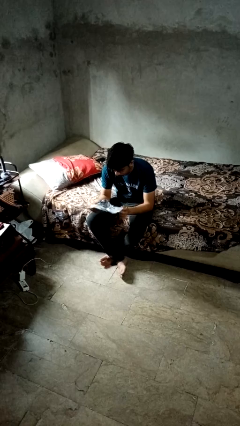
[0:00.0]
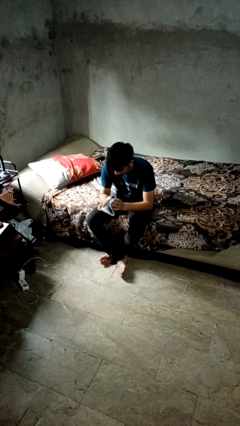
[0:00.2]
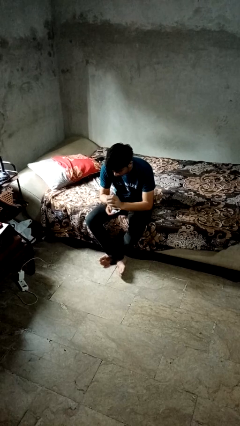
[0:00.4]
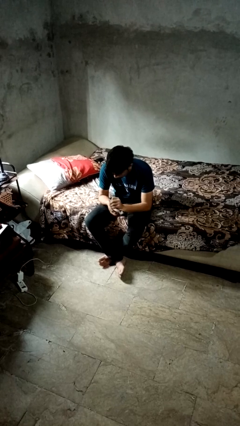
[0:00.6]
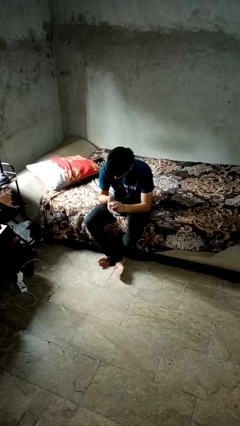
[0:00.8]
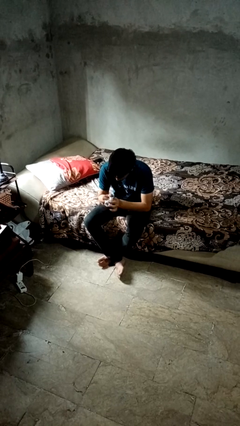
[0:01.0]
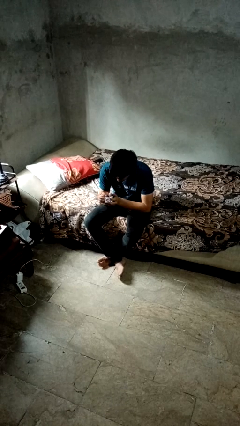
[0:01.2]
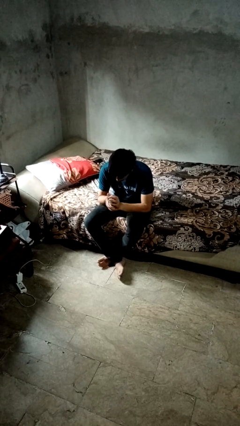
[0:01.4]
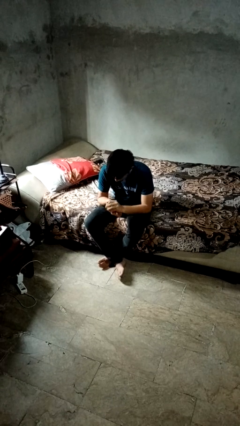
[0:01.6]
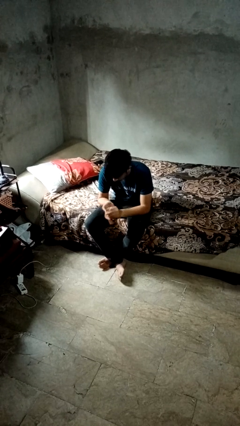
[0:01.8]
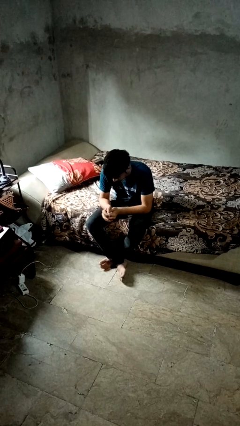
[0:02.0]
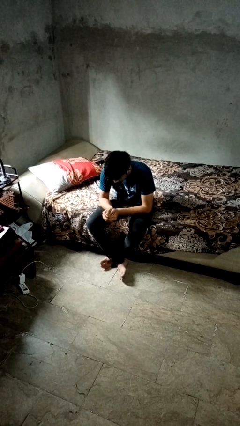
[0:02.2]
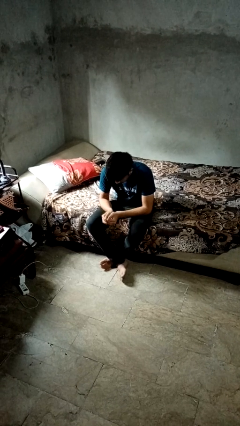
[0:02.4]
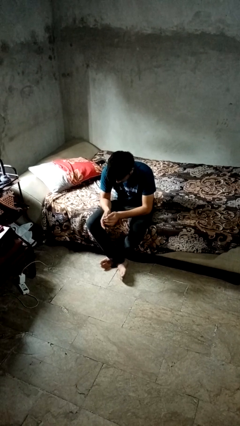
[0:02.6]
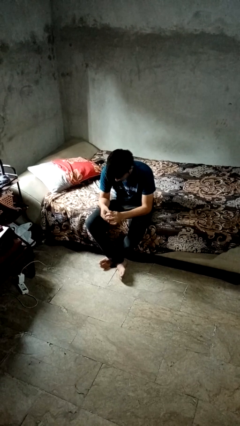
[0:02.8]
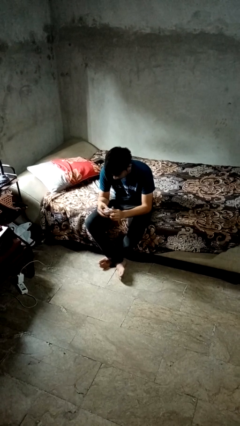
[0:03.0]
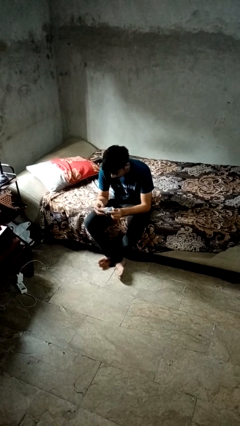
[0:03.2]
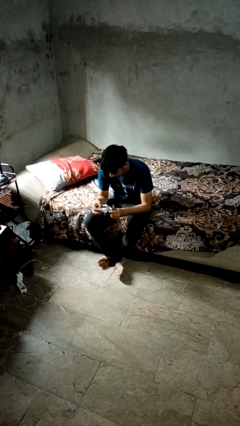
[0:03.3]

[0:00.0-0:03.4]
person crumples paper

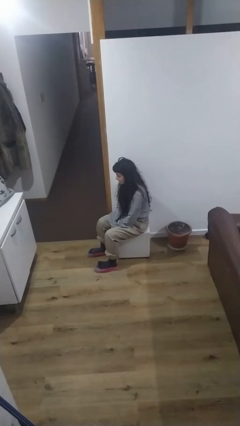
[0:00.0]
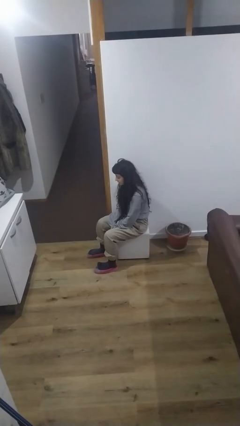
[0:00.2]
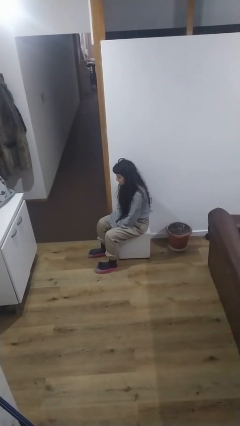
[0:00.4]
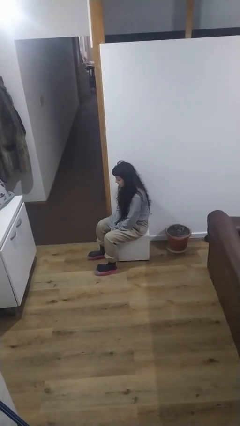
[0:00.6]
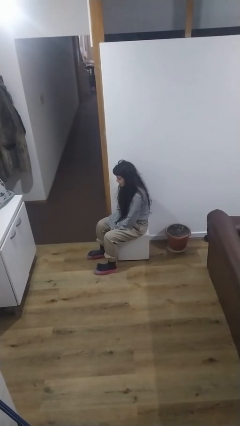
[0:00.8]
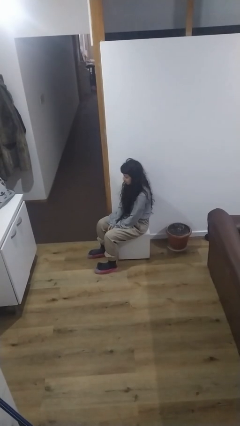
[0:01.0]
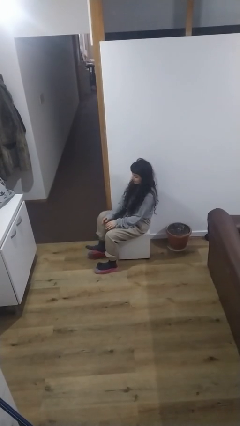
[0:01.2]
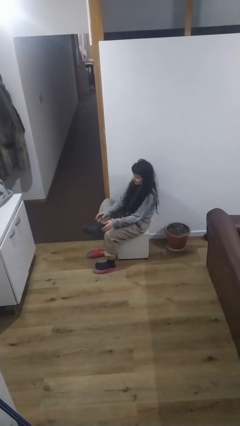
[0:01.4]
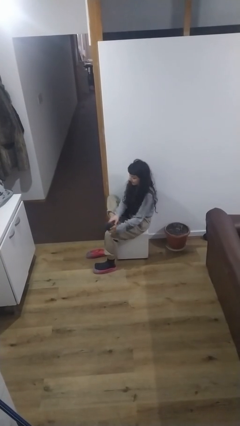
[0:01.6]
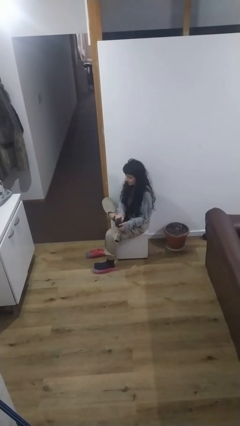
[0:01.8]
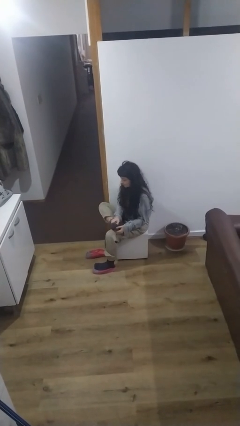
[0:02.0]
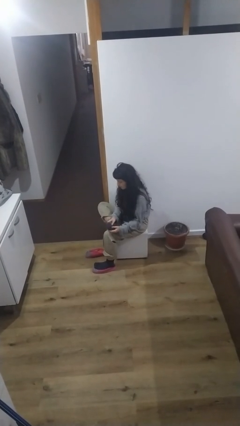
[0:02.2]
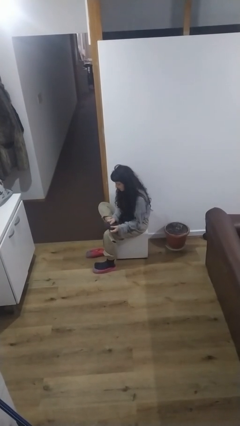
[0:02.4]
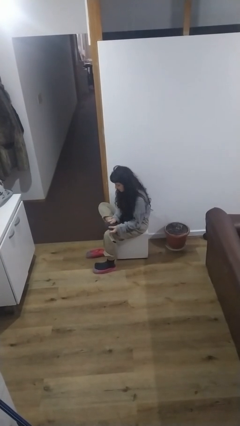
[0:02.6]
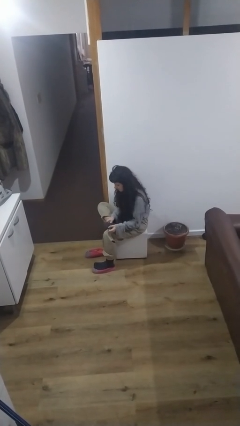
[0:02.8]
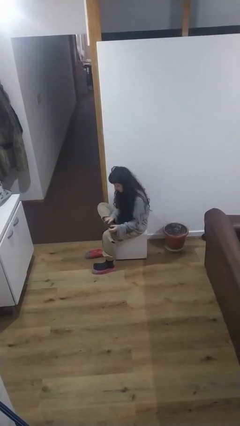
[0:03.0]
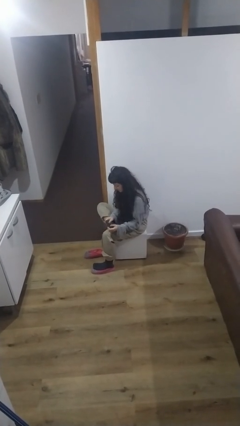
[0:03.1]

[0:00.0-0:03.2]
person rubs foot

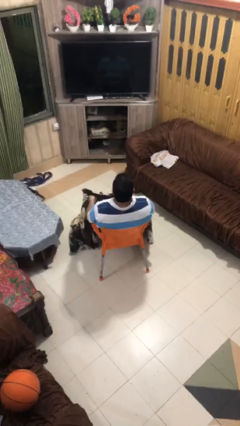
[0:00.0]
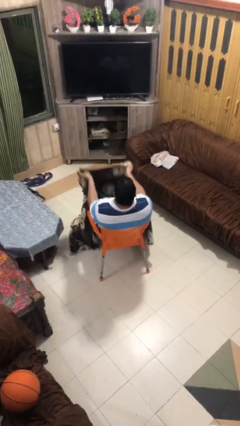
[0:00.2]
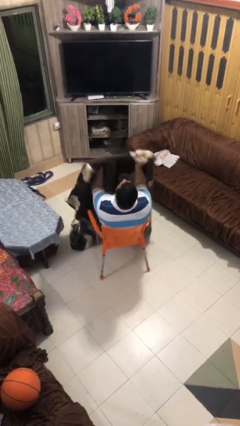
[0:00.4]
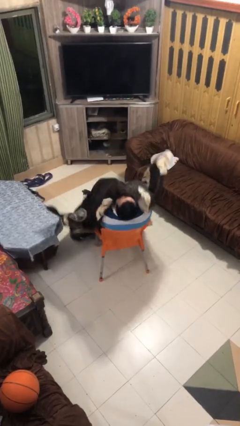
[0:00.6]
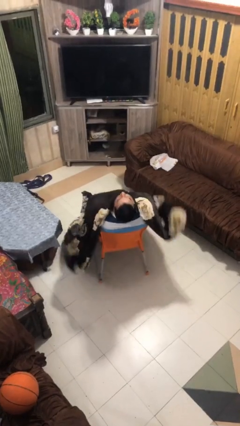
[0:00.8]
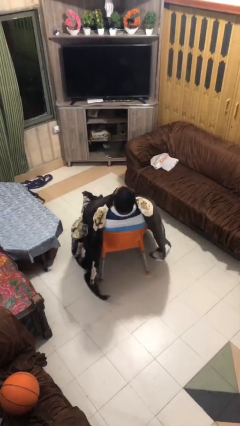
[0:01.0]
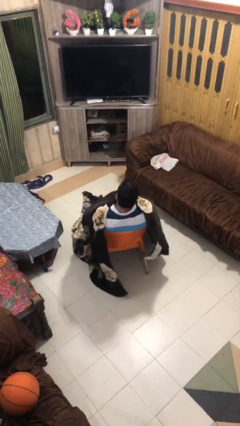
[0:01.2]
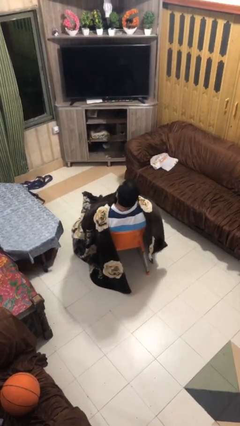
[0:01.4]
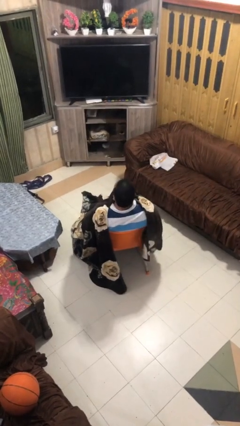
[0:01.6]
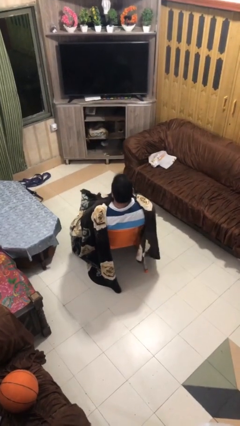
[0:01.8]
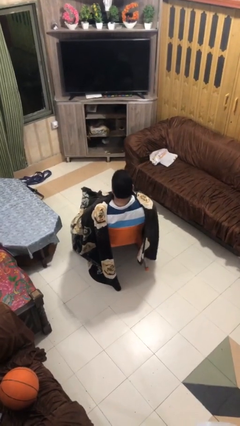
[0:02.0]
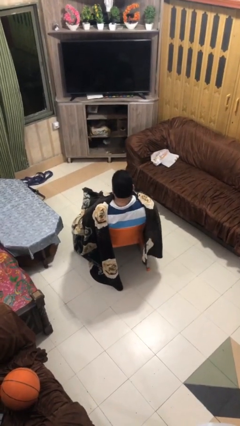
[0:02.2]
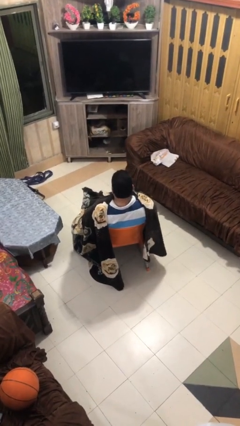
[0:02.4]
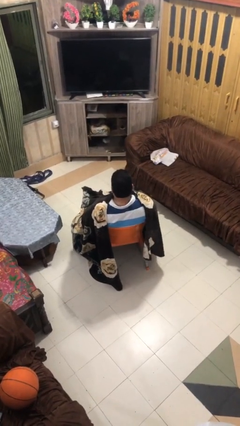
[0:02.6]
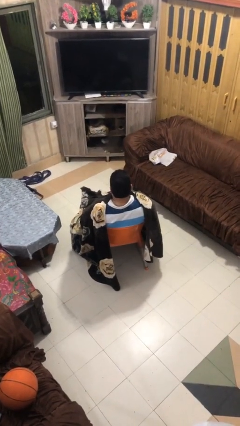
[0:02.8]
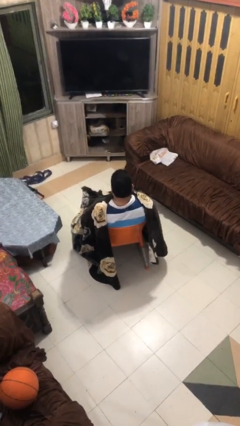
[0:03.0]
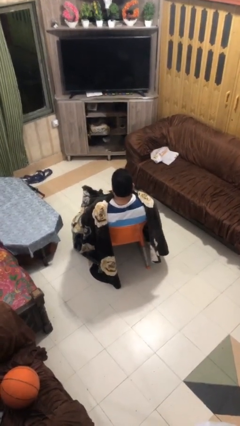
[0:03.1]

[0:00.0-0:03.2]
person covers with blanket

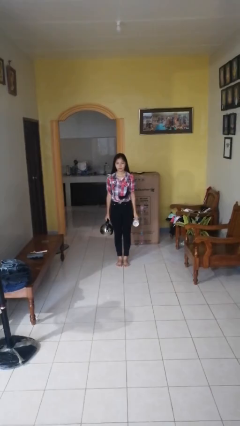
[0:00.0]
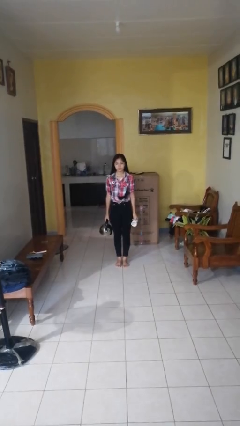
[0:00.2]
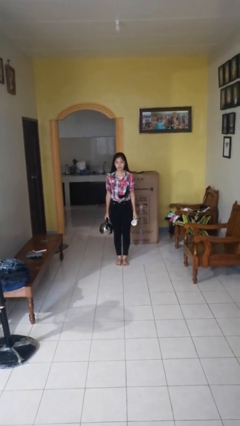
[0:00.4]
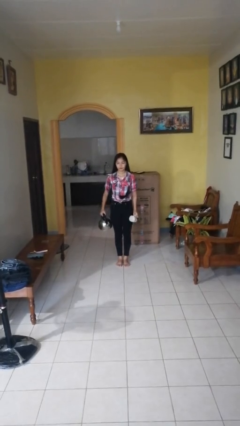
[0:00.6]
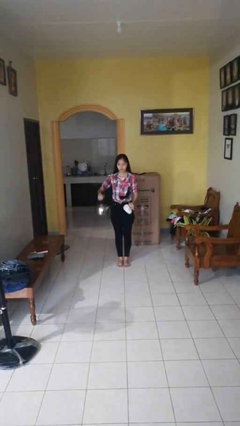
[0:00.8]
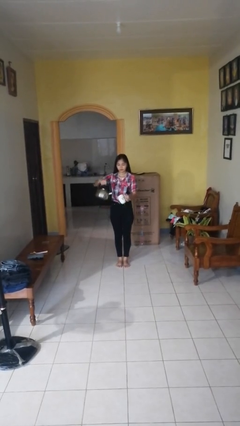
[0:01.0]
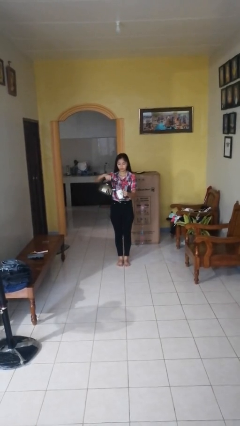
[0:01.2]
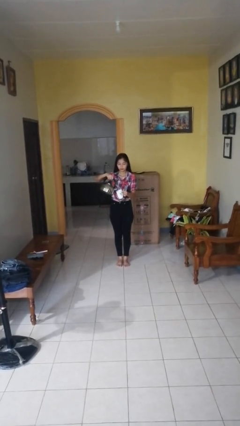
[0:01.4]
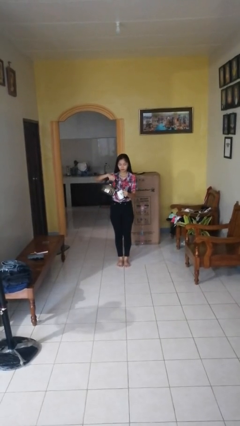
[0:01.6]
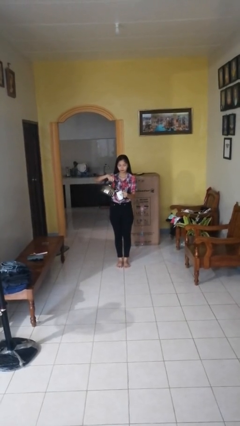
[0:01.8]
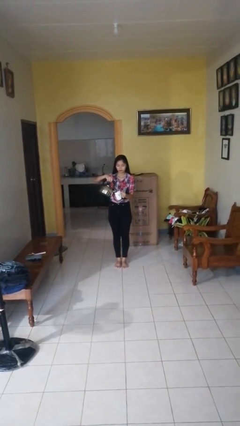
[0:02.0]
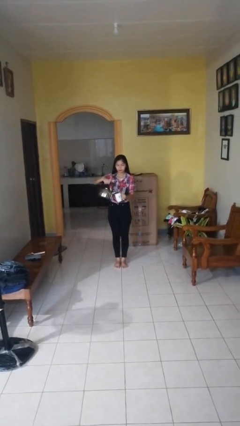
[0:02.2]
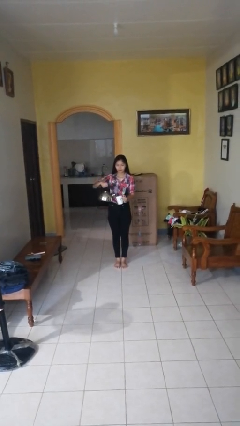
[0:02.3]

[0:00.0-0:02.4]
person pours coffee into mug

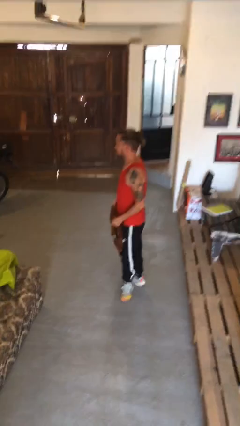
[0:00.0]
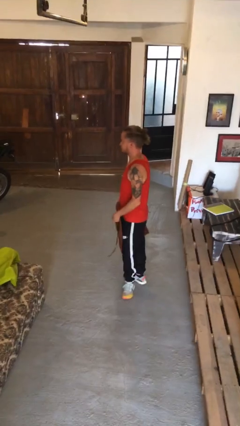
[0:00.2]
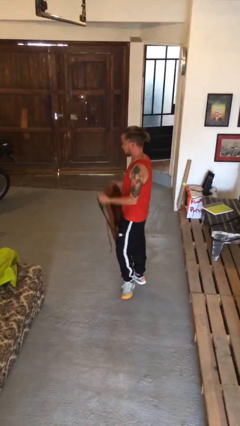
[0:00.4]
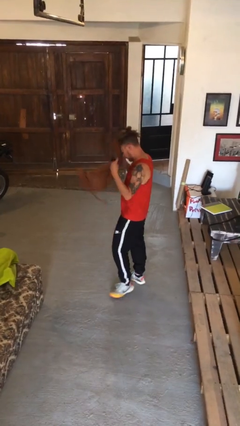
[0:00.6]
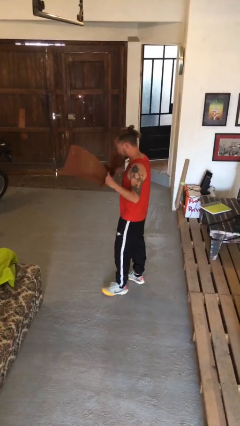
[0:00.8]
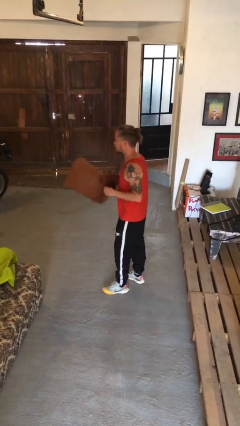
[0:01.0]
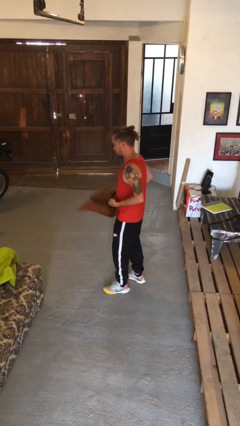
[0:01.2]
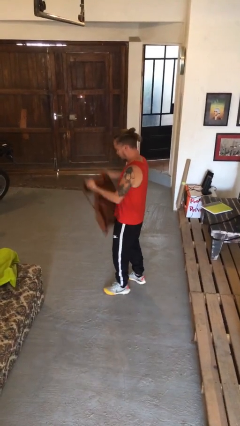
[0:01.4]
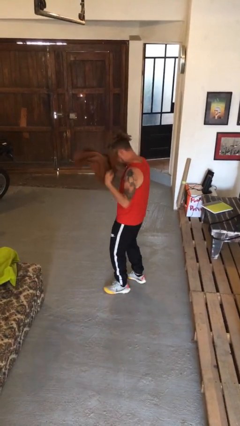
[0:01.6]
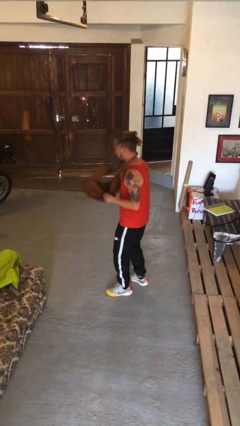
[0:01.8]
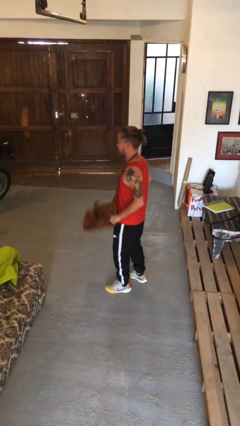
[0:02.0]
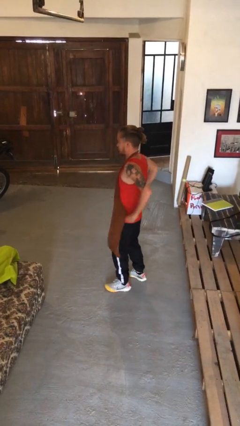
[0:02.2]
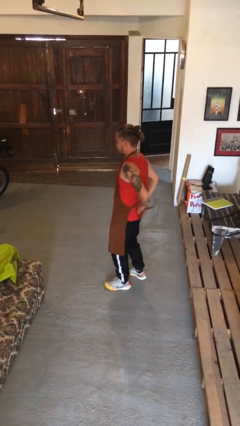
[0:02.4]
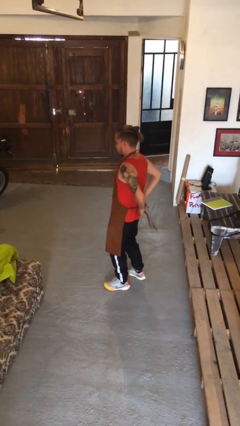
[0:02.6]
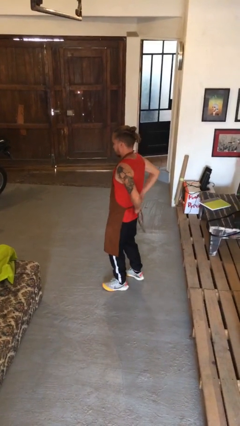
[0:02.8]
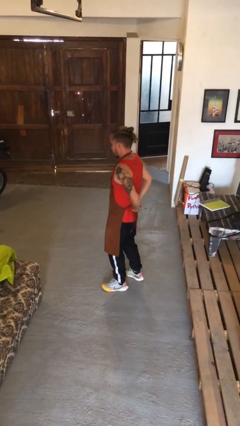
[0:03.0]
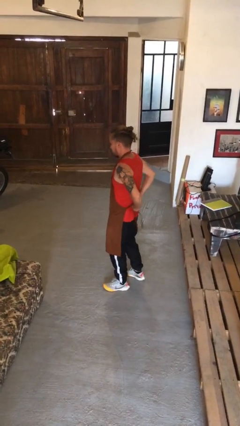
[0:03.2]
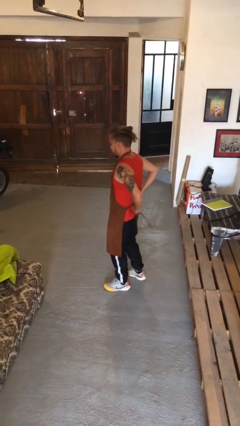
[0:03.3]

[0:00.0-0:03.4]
person puts on apron

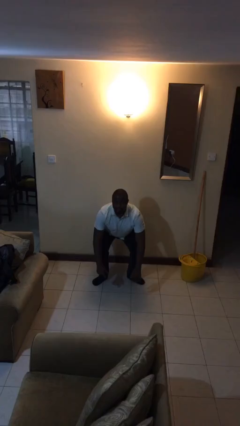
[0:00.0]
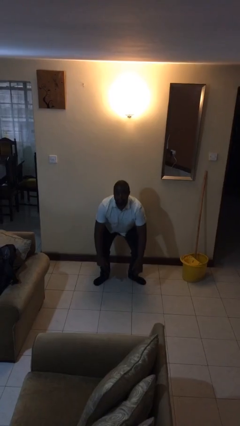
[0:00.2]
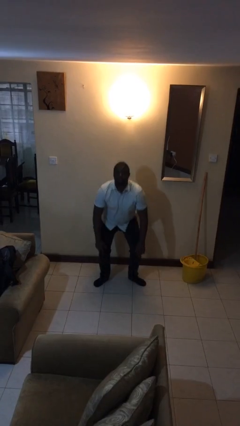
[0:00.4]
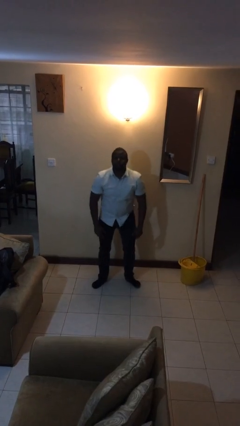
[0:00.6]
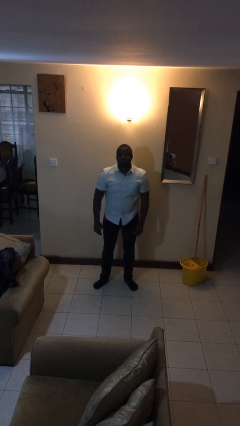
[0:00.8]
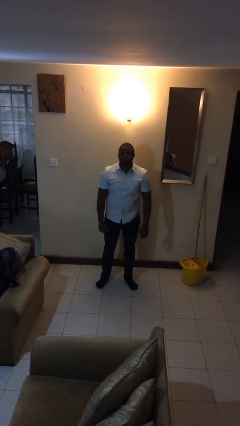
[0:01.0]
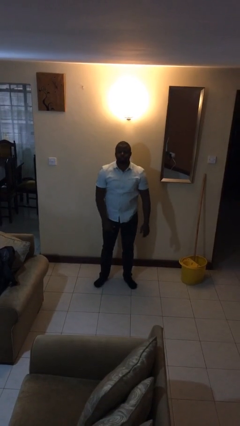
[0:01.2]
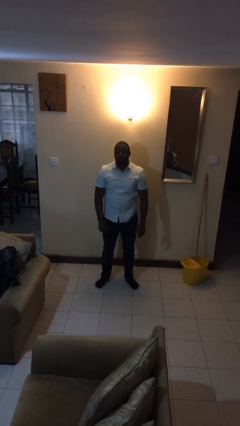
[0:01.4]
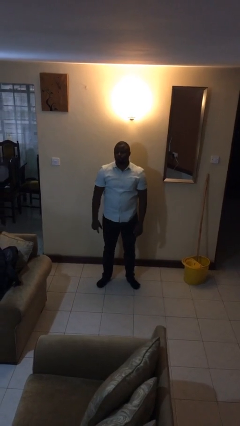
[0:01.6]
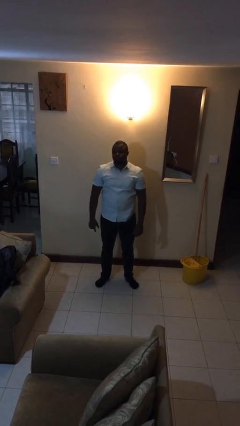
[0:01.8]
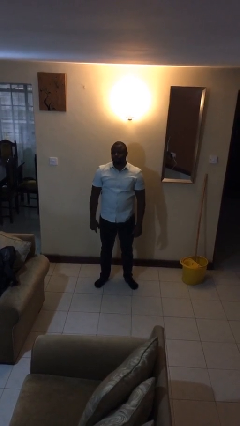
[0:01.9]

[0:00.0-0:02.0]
person stands up
